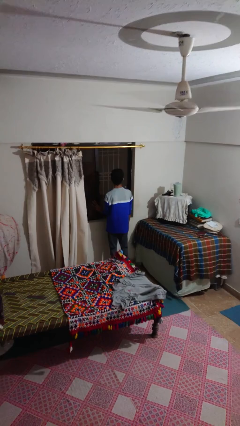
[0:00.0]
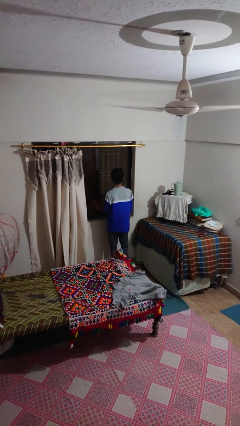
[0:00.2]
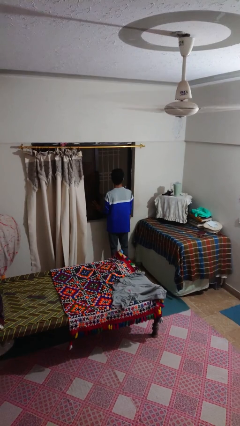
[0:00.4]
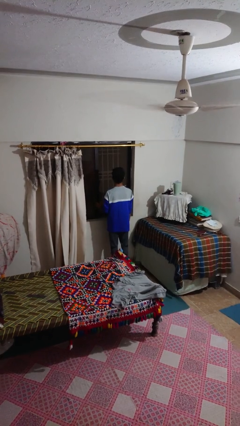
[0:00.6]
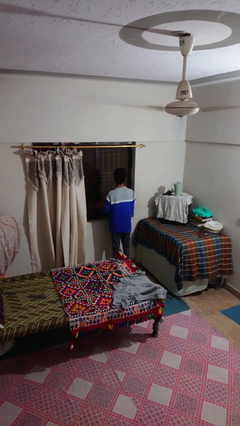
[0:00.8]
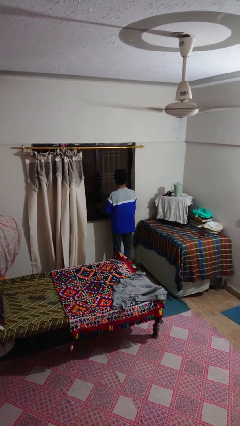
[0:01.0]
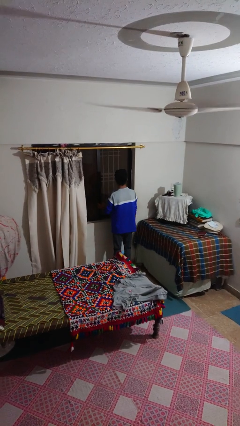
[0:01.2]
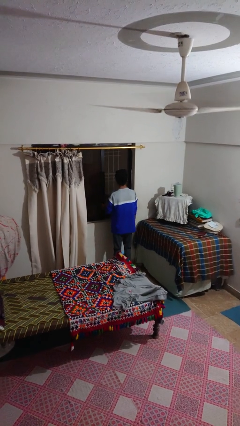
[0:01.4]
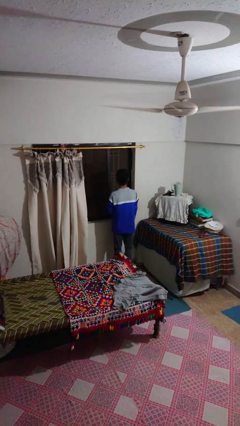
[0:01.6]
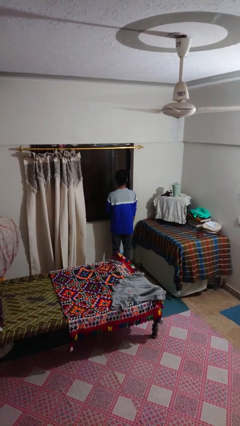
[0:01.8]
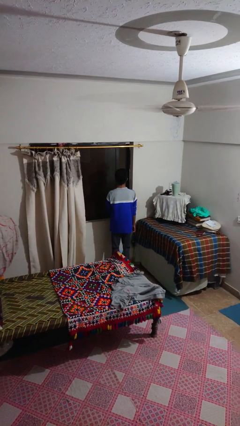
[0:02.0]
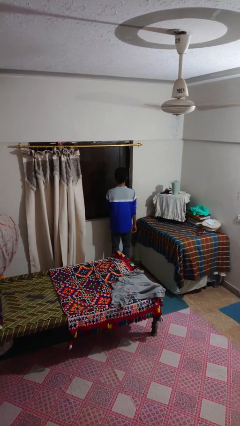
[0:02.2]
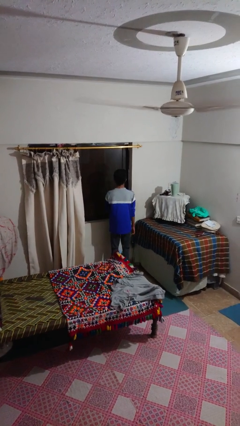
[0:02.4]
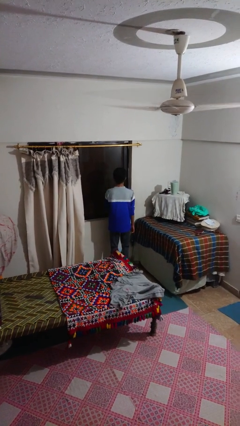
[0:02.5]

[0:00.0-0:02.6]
person closes home window

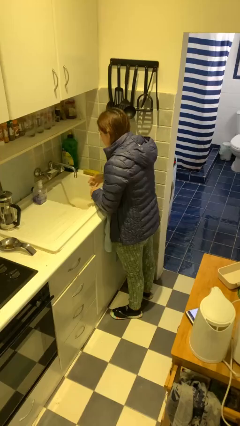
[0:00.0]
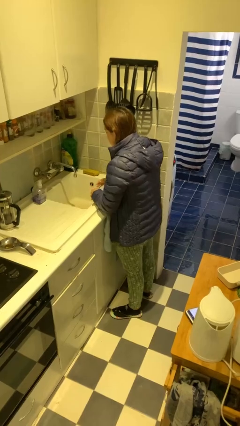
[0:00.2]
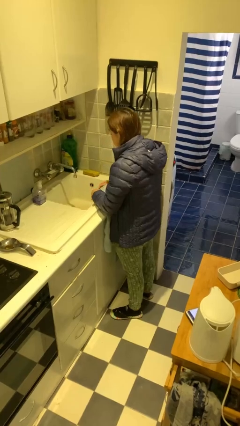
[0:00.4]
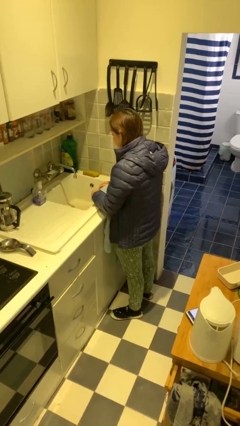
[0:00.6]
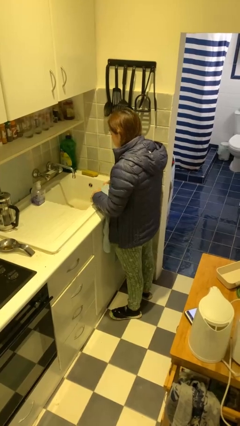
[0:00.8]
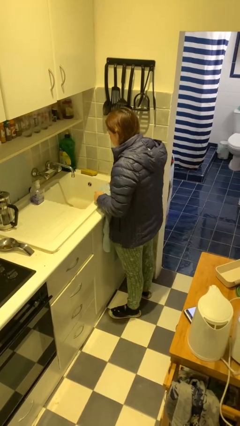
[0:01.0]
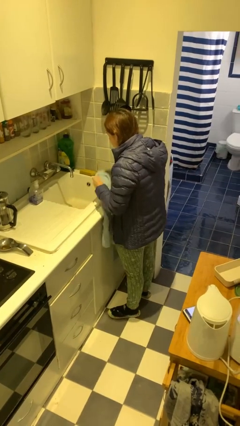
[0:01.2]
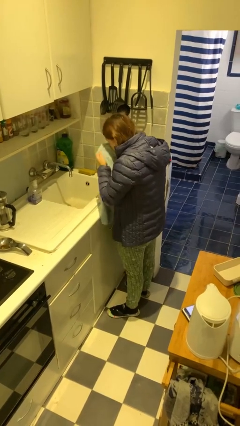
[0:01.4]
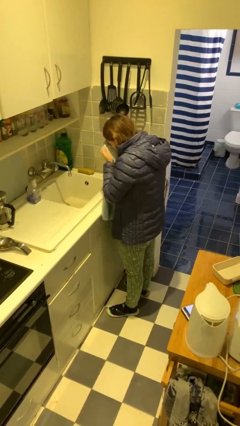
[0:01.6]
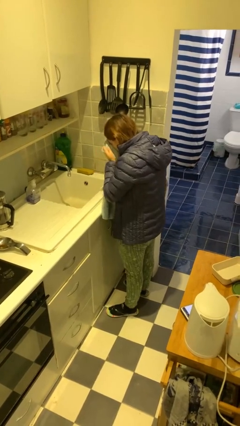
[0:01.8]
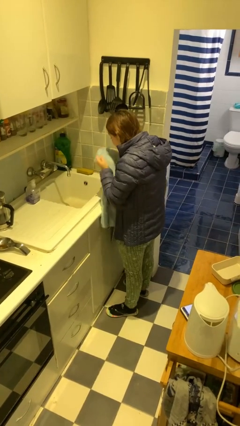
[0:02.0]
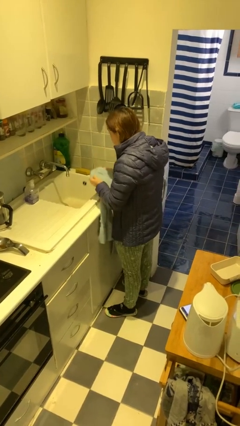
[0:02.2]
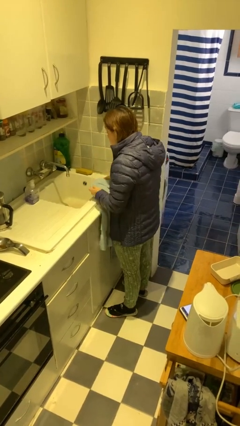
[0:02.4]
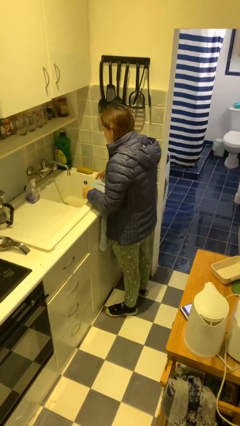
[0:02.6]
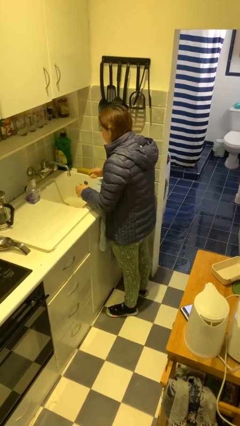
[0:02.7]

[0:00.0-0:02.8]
person dries face with towel

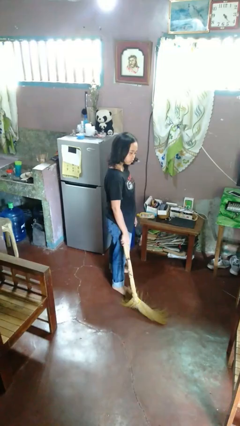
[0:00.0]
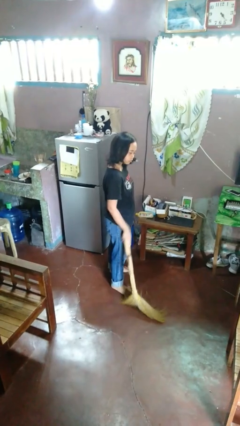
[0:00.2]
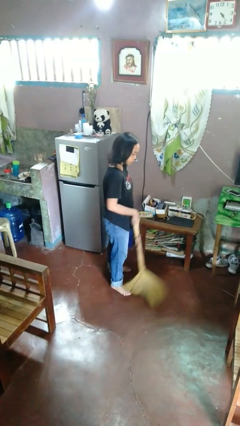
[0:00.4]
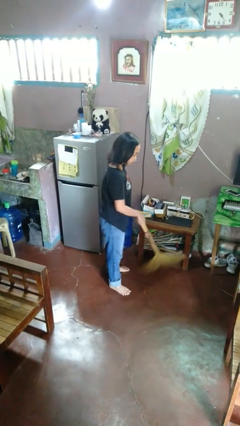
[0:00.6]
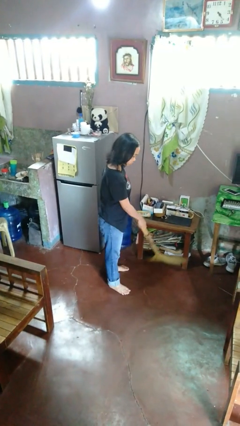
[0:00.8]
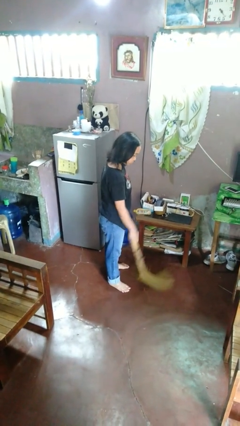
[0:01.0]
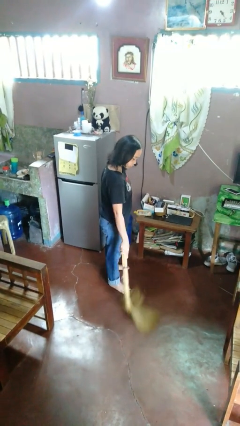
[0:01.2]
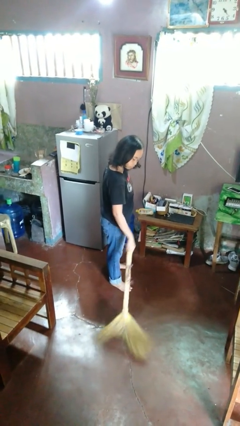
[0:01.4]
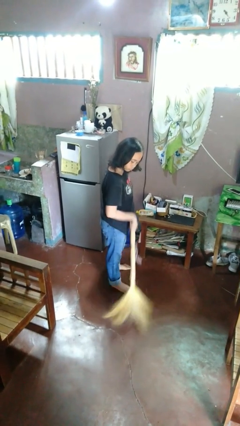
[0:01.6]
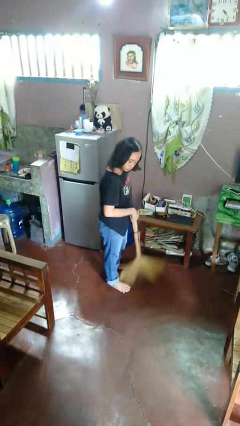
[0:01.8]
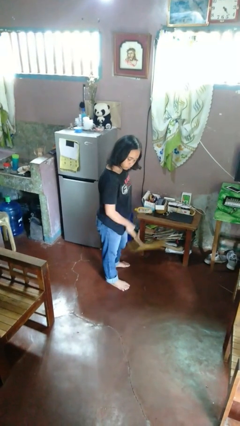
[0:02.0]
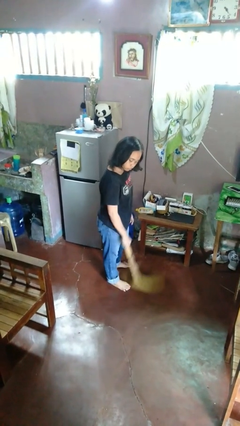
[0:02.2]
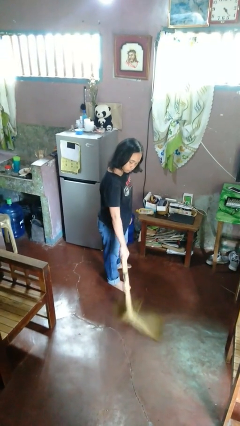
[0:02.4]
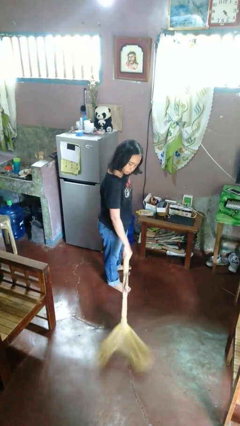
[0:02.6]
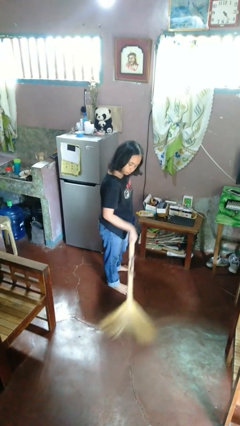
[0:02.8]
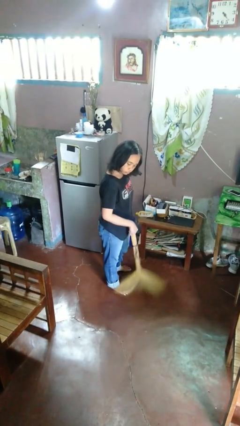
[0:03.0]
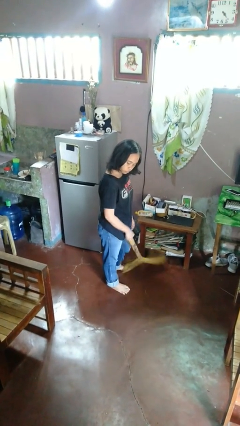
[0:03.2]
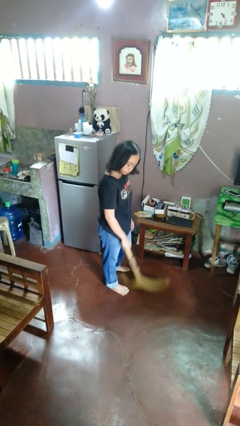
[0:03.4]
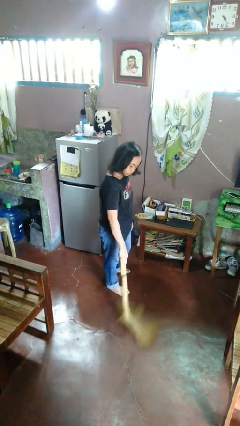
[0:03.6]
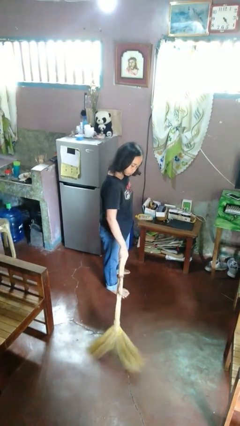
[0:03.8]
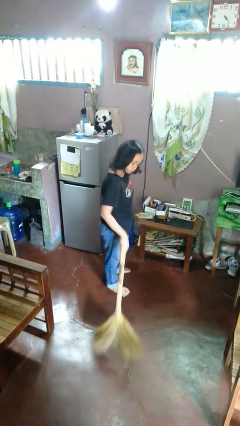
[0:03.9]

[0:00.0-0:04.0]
person sweeps floor

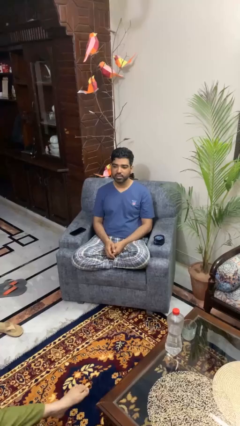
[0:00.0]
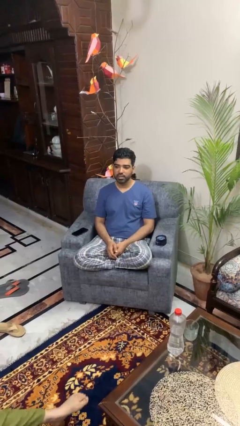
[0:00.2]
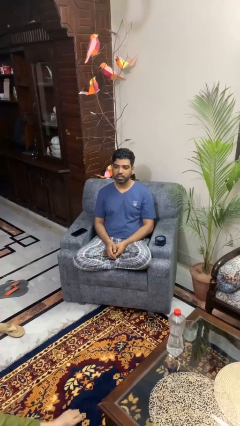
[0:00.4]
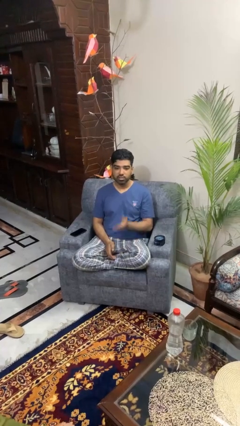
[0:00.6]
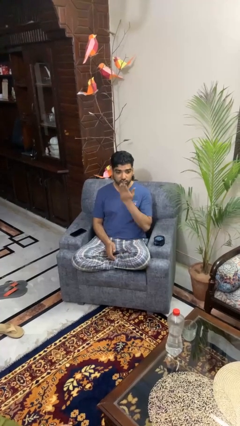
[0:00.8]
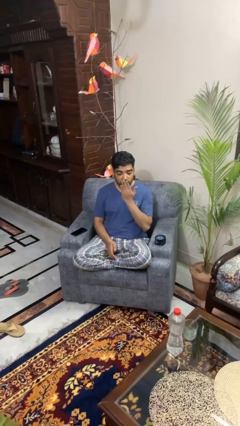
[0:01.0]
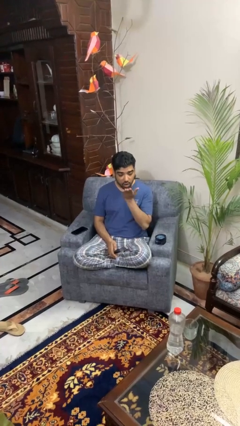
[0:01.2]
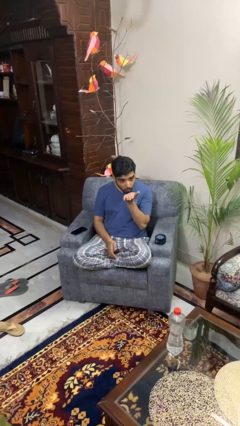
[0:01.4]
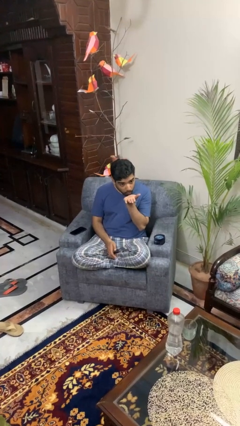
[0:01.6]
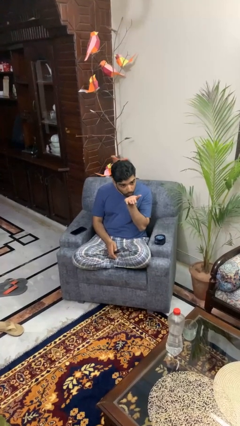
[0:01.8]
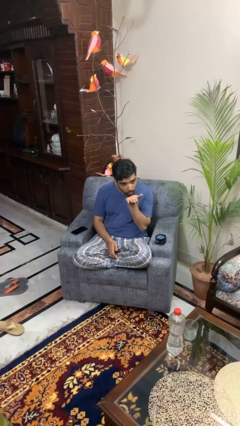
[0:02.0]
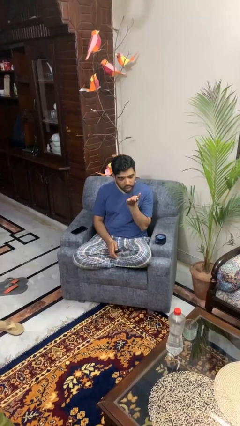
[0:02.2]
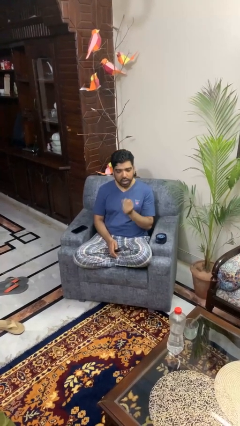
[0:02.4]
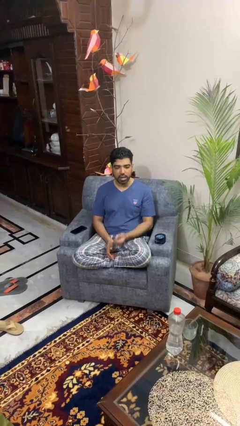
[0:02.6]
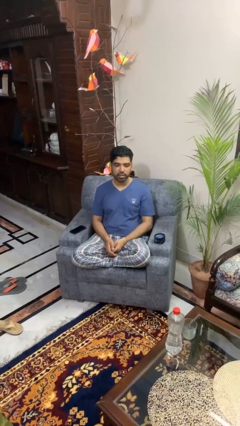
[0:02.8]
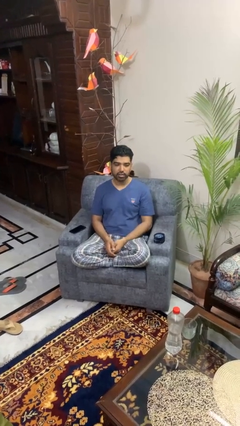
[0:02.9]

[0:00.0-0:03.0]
person gestures blow kiss

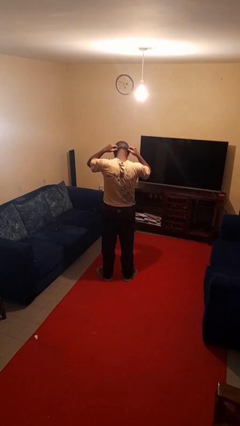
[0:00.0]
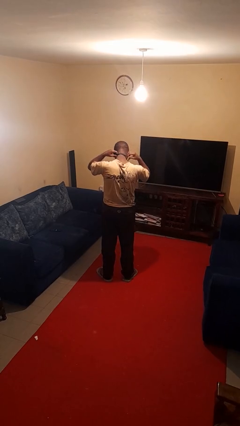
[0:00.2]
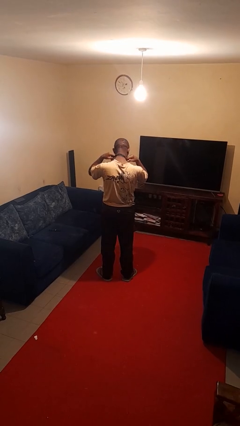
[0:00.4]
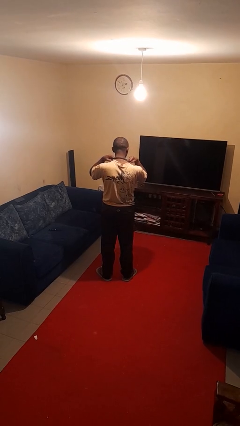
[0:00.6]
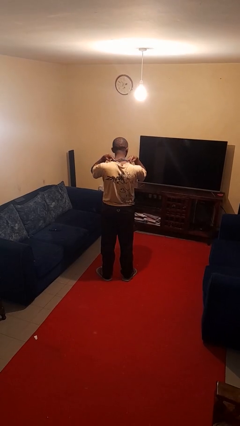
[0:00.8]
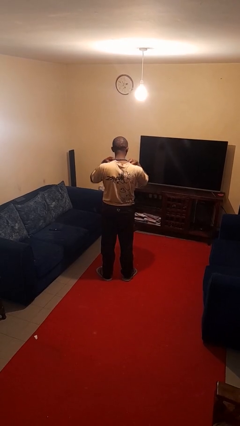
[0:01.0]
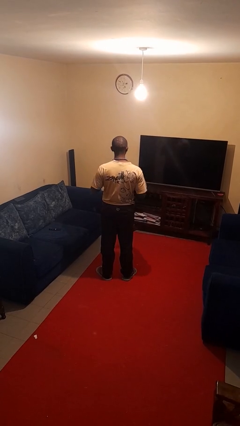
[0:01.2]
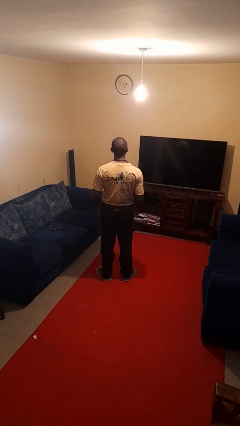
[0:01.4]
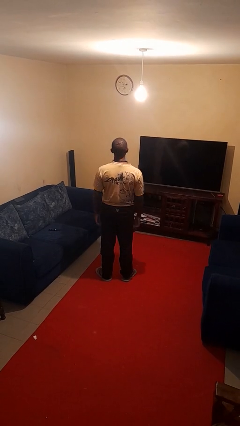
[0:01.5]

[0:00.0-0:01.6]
person puts on necklace

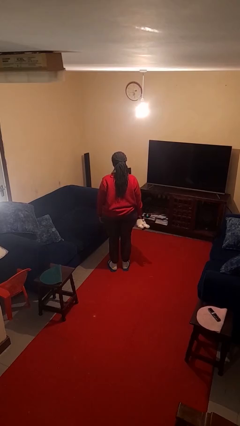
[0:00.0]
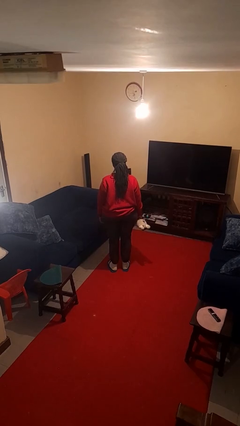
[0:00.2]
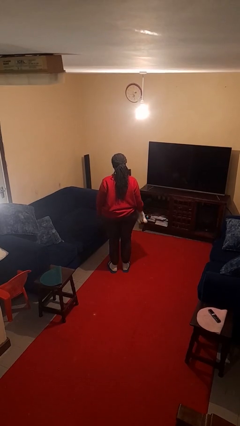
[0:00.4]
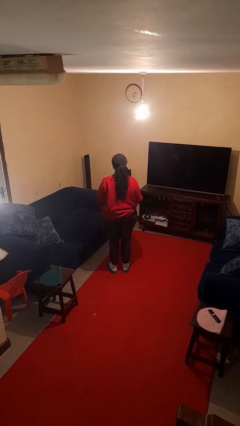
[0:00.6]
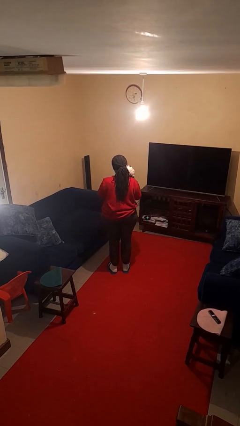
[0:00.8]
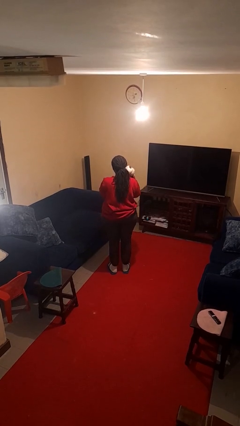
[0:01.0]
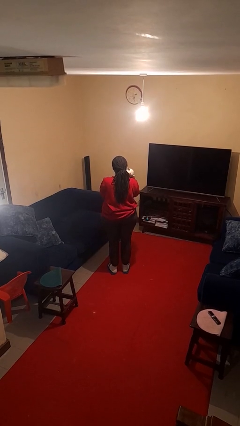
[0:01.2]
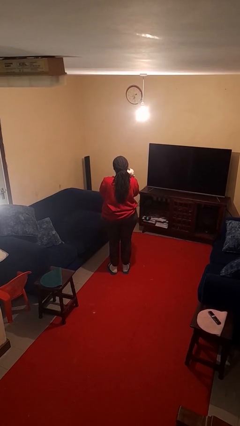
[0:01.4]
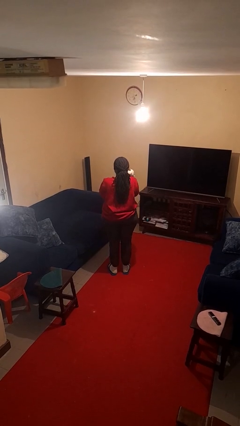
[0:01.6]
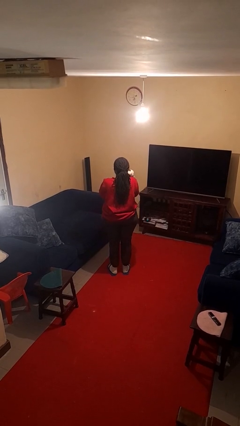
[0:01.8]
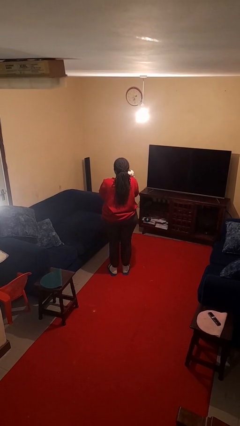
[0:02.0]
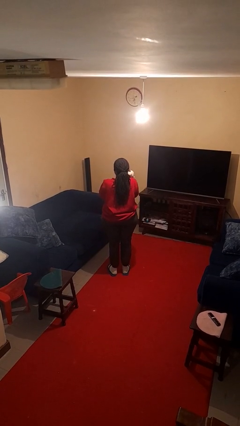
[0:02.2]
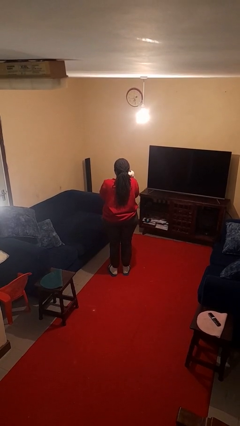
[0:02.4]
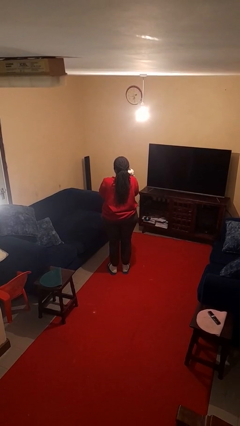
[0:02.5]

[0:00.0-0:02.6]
person hugs stuffed animal

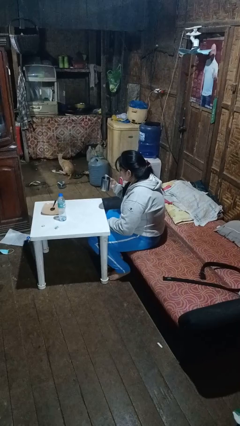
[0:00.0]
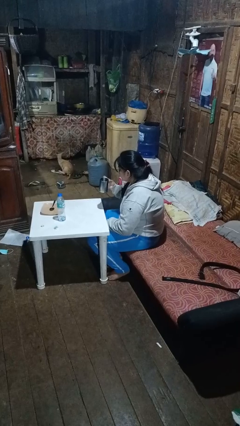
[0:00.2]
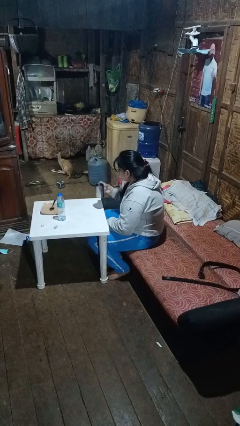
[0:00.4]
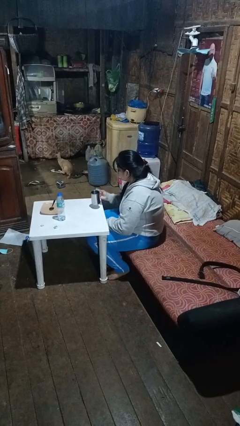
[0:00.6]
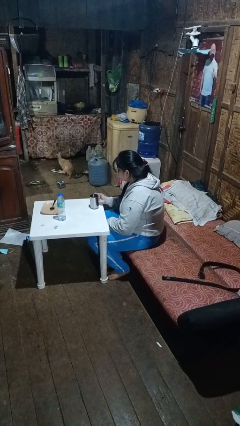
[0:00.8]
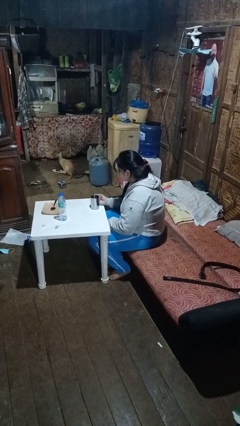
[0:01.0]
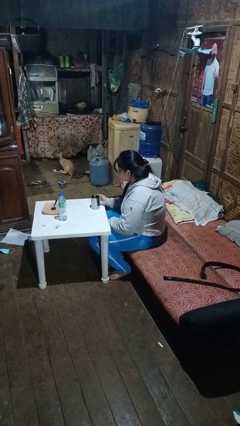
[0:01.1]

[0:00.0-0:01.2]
person puts down object on table
